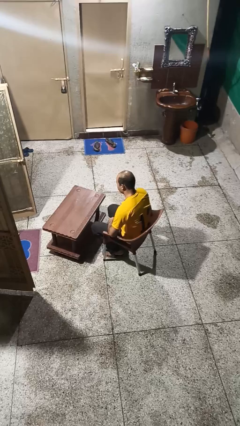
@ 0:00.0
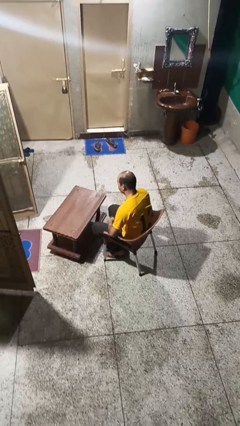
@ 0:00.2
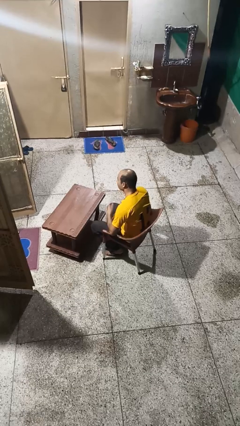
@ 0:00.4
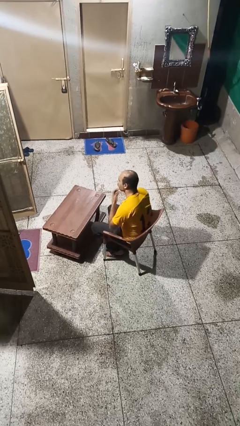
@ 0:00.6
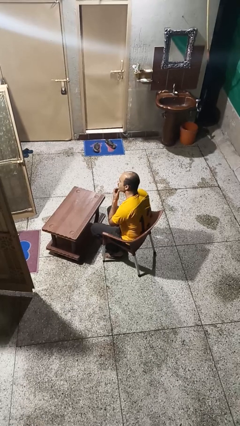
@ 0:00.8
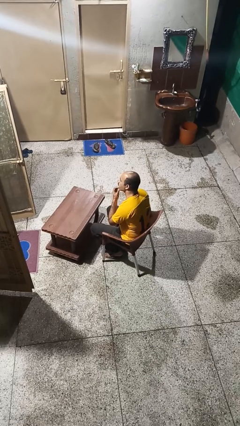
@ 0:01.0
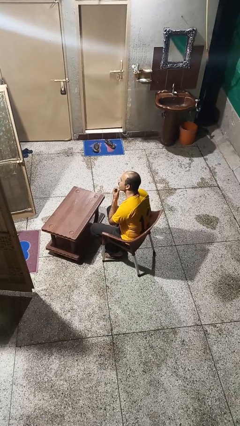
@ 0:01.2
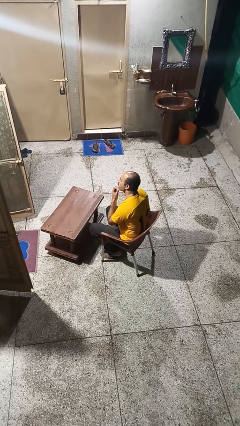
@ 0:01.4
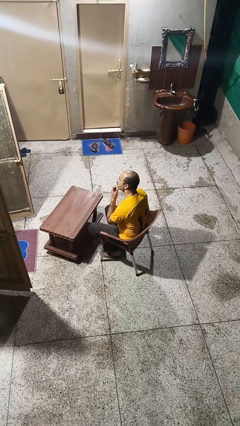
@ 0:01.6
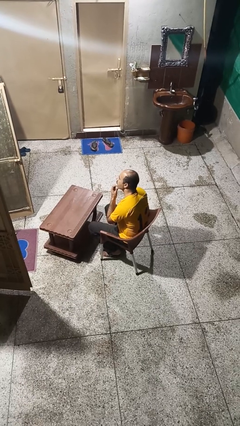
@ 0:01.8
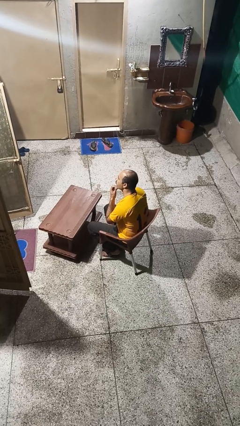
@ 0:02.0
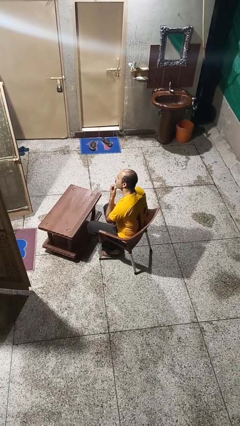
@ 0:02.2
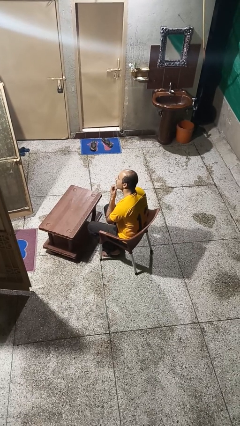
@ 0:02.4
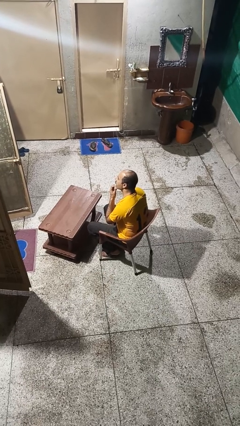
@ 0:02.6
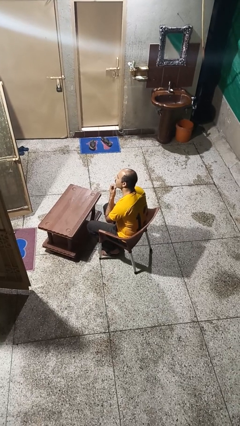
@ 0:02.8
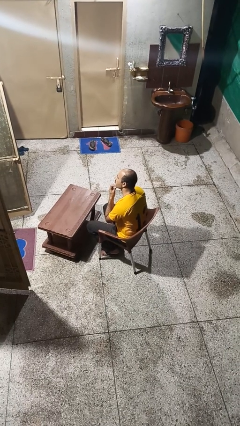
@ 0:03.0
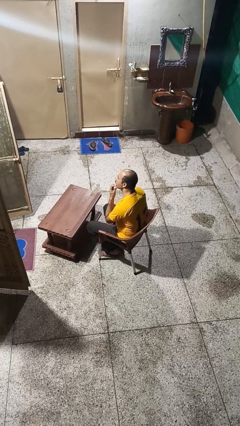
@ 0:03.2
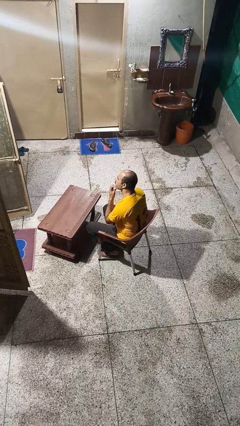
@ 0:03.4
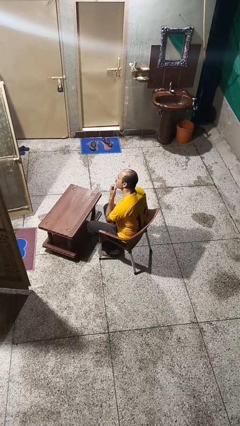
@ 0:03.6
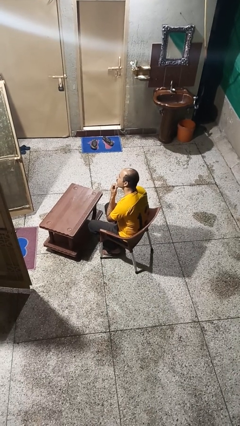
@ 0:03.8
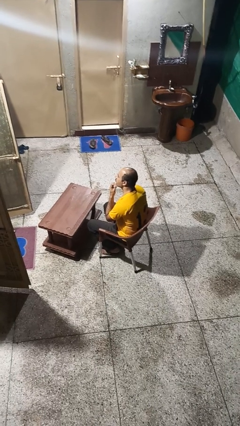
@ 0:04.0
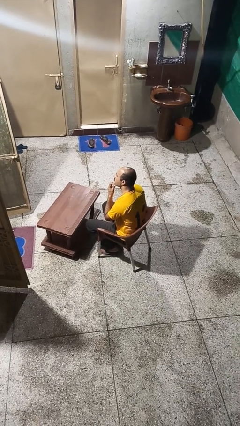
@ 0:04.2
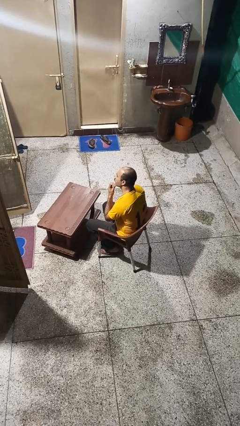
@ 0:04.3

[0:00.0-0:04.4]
person strokes chin

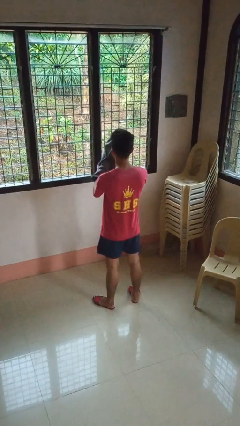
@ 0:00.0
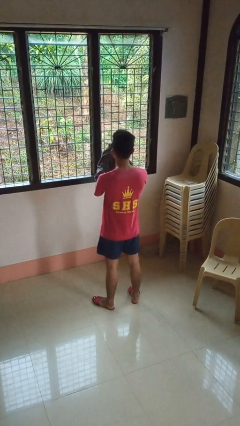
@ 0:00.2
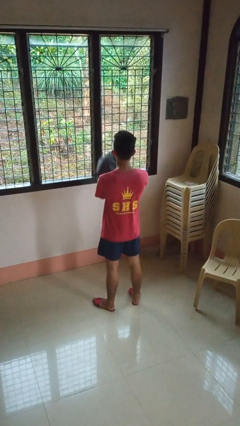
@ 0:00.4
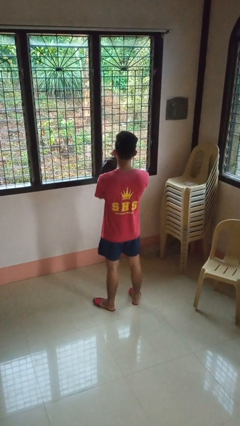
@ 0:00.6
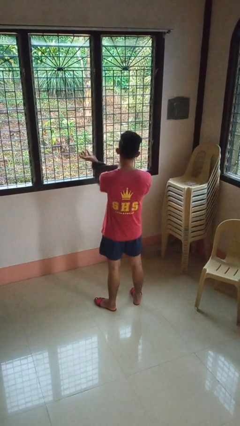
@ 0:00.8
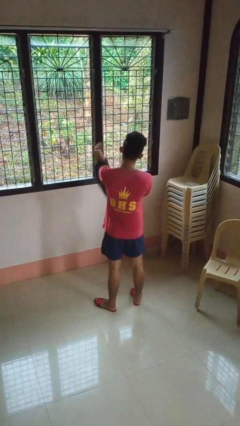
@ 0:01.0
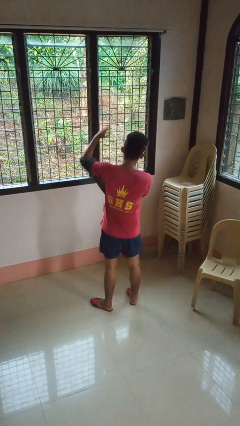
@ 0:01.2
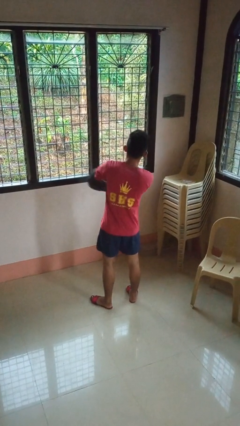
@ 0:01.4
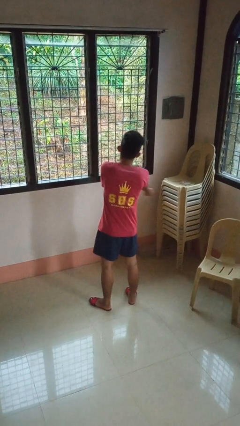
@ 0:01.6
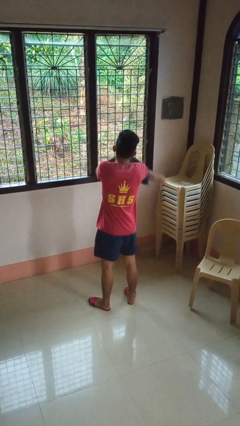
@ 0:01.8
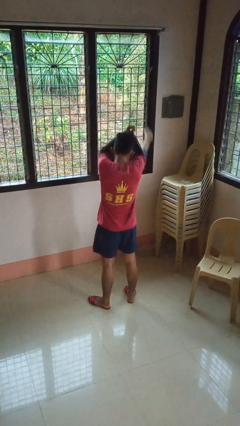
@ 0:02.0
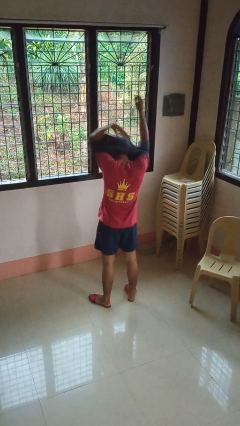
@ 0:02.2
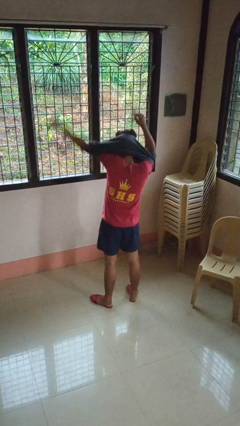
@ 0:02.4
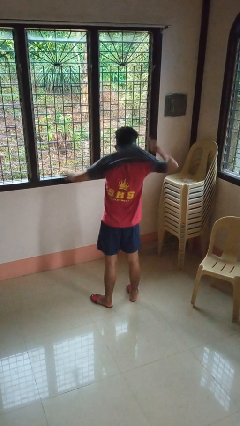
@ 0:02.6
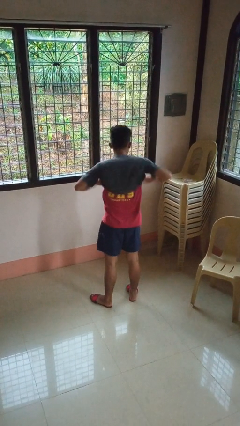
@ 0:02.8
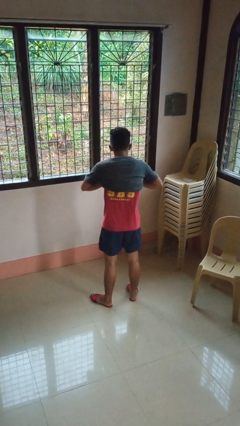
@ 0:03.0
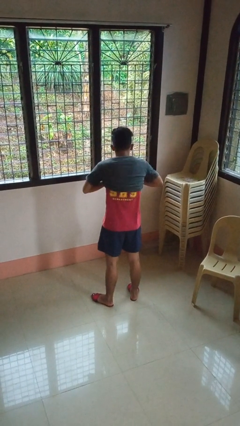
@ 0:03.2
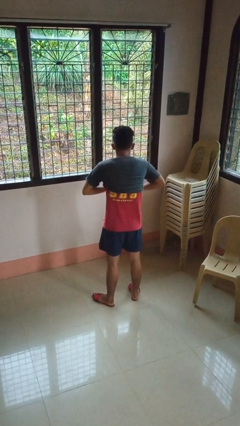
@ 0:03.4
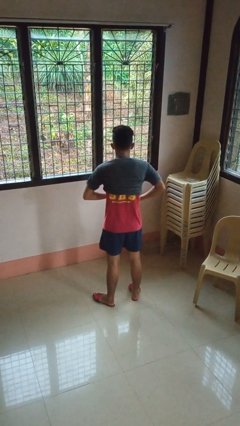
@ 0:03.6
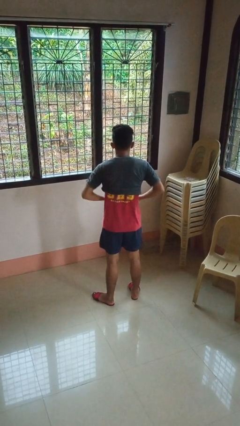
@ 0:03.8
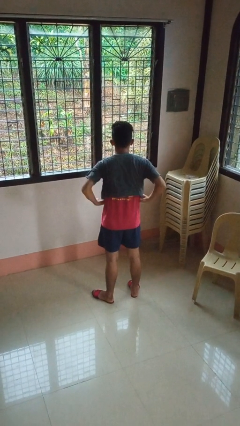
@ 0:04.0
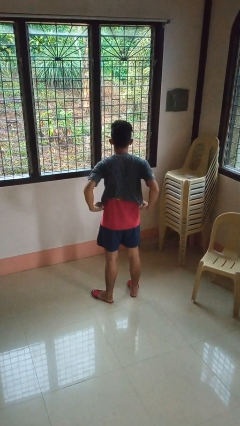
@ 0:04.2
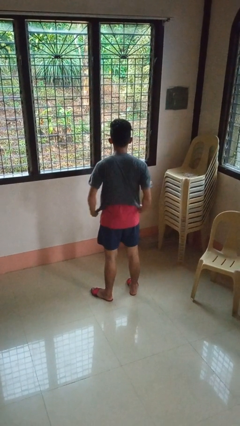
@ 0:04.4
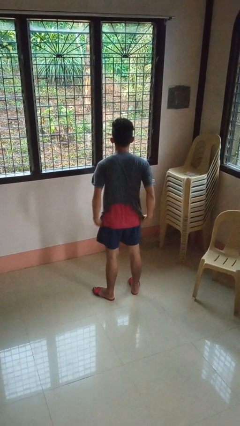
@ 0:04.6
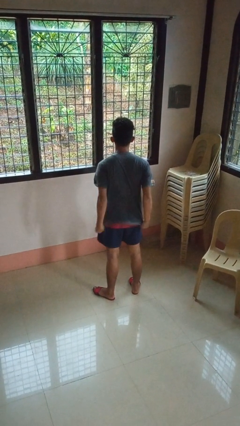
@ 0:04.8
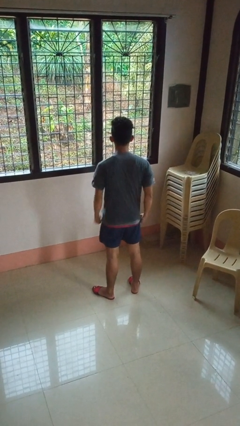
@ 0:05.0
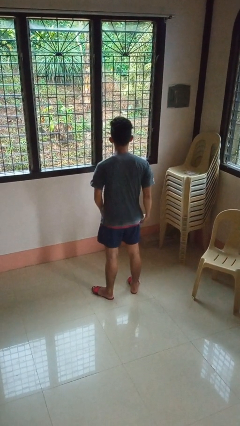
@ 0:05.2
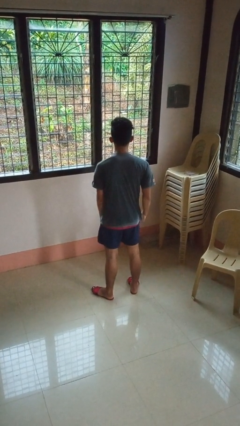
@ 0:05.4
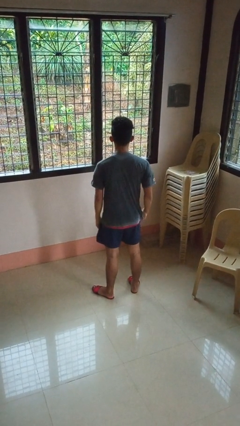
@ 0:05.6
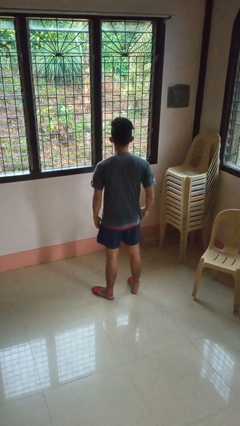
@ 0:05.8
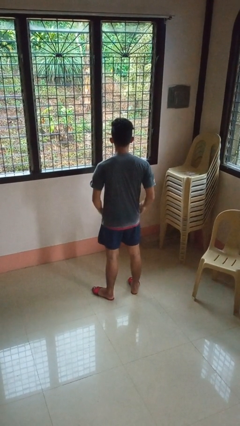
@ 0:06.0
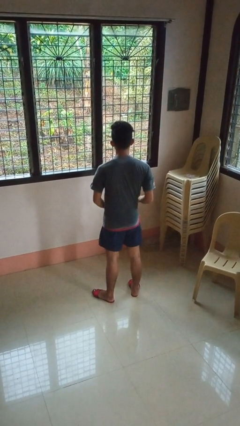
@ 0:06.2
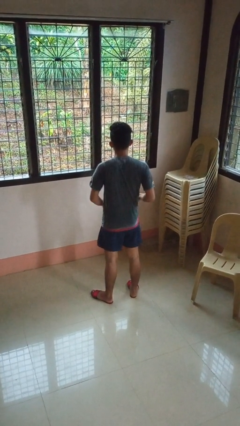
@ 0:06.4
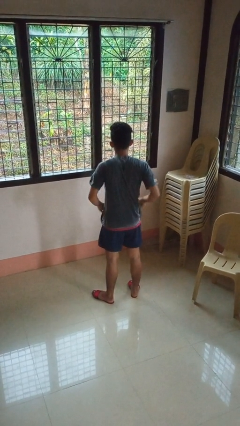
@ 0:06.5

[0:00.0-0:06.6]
person puts on shirt

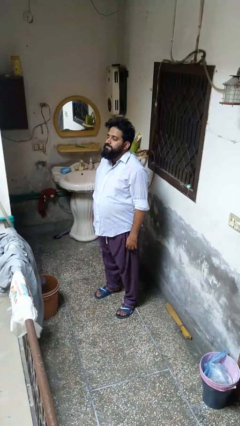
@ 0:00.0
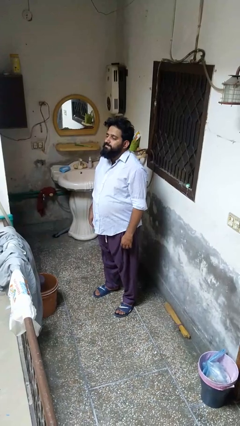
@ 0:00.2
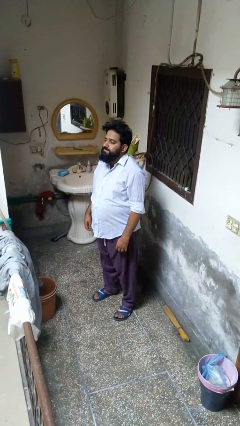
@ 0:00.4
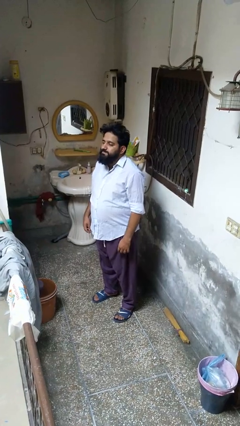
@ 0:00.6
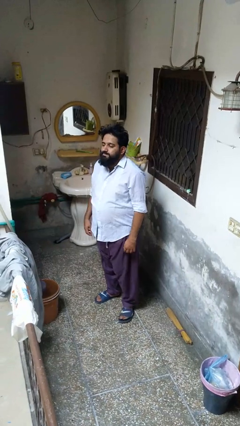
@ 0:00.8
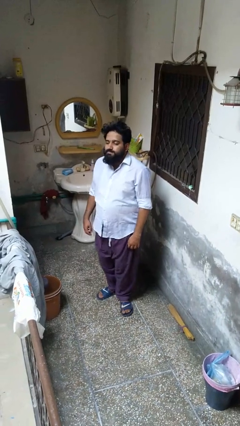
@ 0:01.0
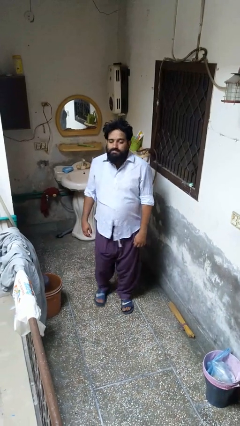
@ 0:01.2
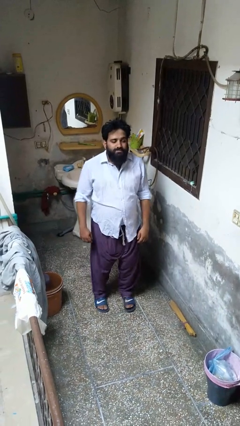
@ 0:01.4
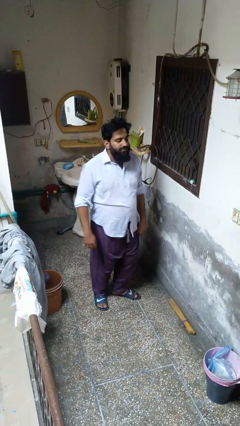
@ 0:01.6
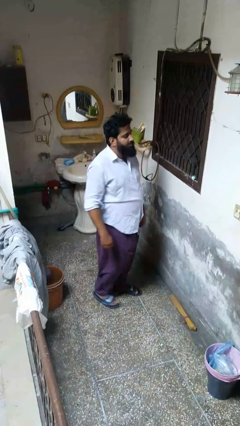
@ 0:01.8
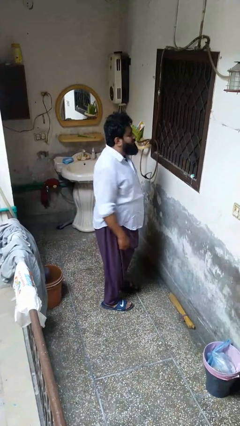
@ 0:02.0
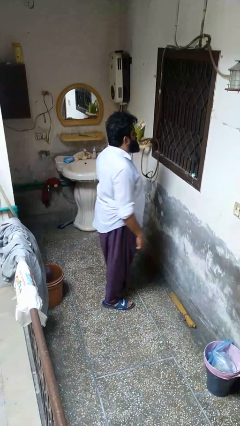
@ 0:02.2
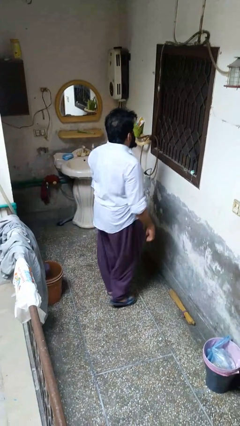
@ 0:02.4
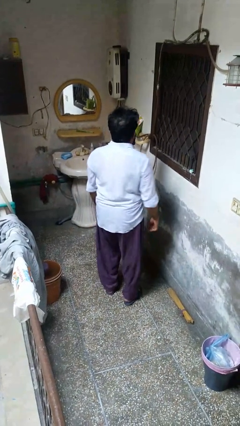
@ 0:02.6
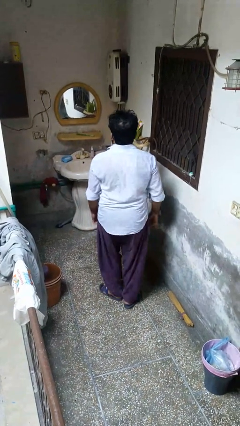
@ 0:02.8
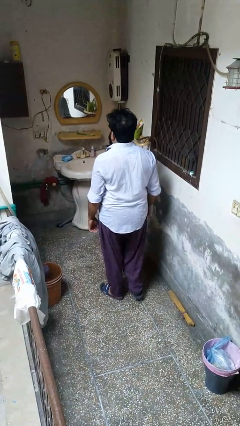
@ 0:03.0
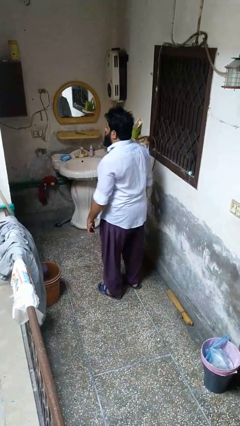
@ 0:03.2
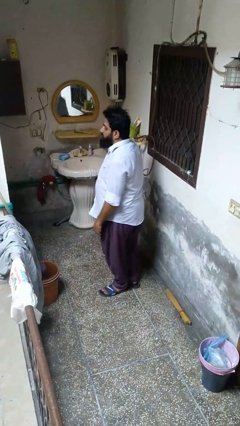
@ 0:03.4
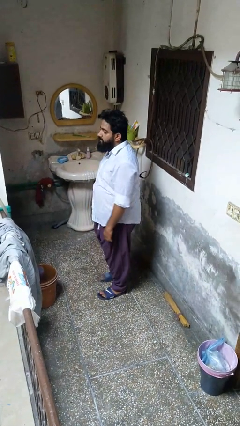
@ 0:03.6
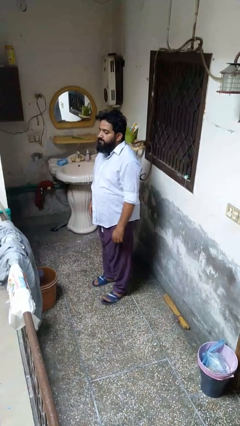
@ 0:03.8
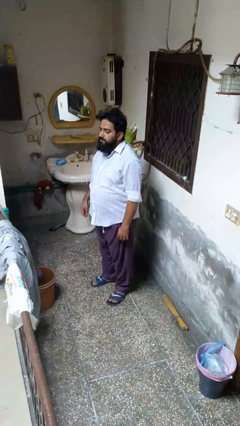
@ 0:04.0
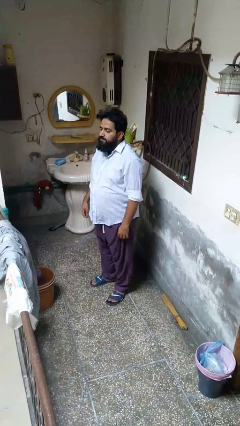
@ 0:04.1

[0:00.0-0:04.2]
person twirls

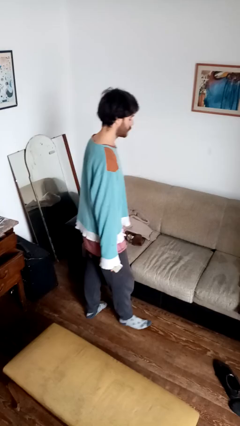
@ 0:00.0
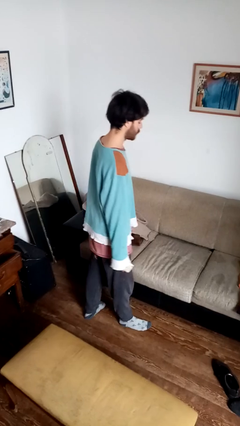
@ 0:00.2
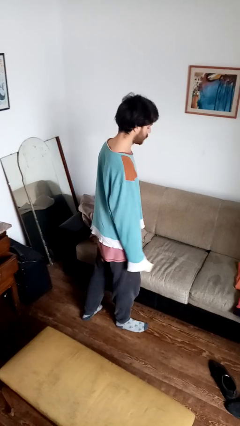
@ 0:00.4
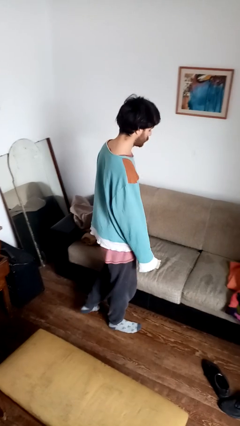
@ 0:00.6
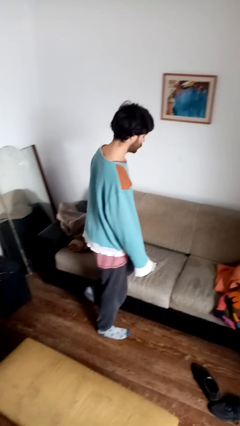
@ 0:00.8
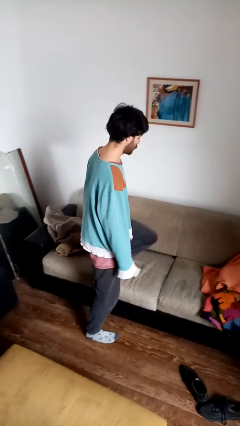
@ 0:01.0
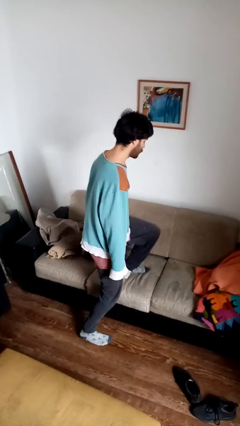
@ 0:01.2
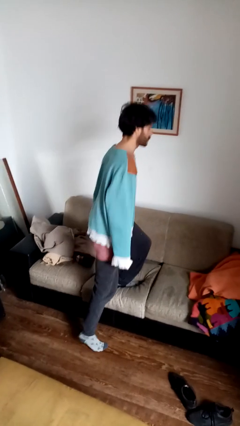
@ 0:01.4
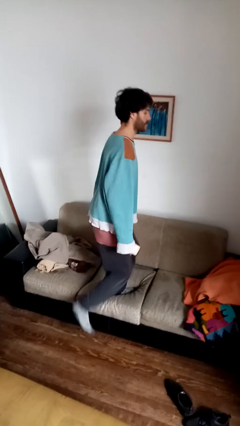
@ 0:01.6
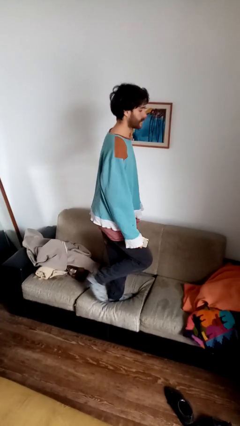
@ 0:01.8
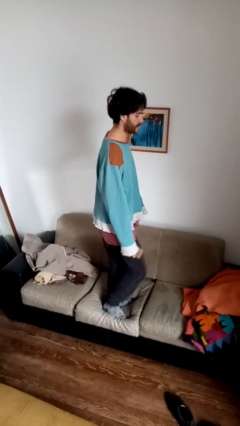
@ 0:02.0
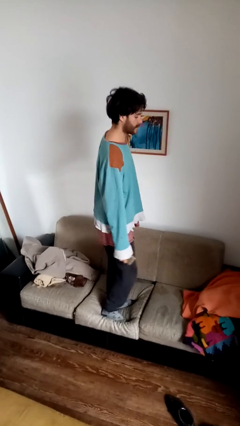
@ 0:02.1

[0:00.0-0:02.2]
person climbs on couch
